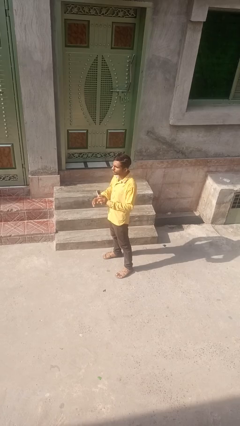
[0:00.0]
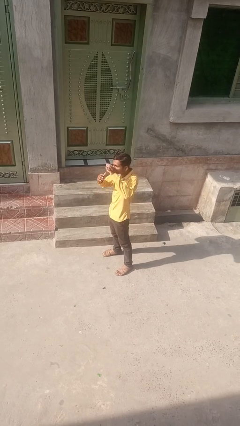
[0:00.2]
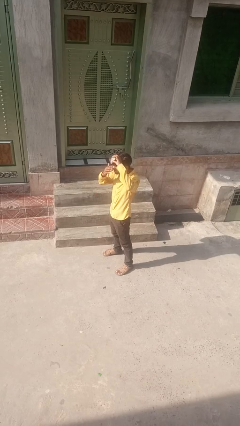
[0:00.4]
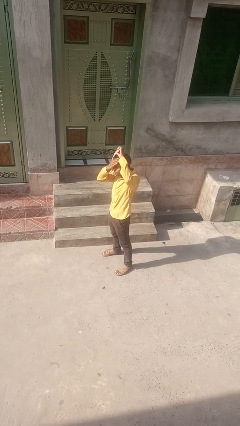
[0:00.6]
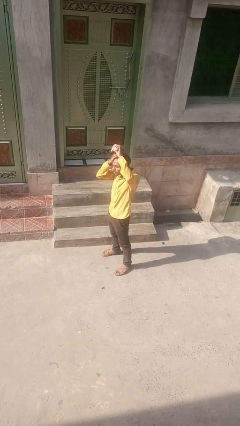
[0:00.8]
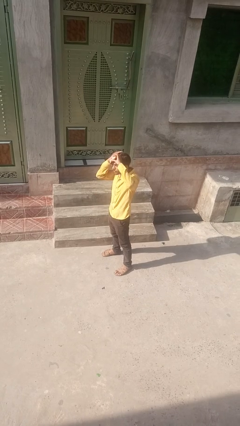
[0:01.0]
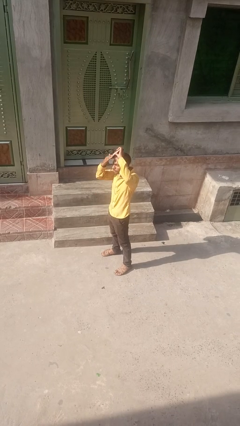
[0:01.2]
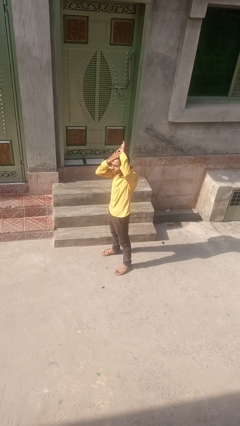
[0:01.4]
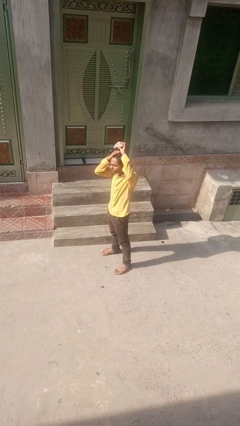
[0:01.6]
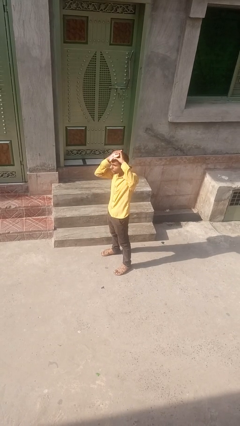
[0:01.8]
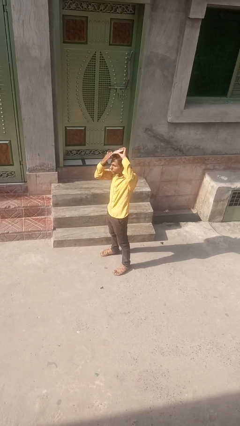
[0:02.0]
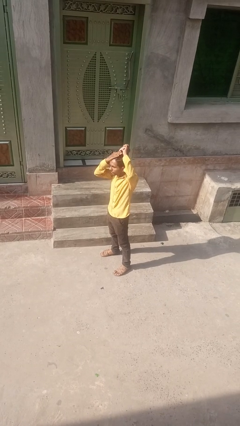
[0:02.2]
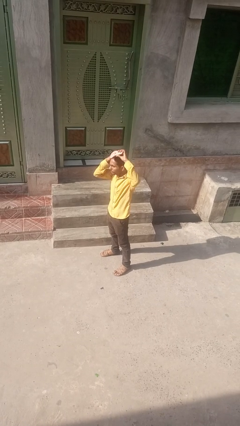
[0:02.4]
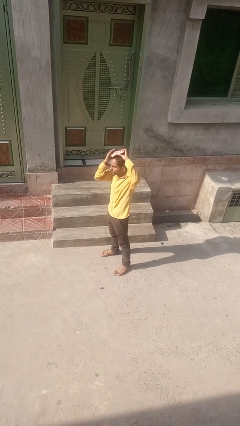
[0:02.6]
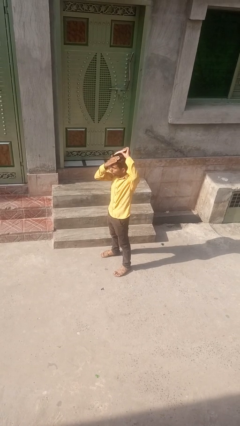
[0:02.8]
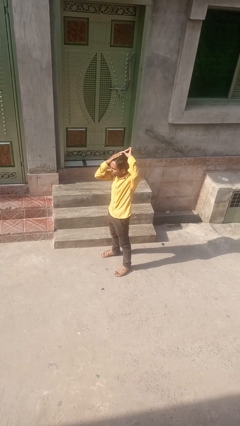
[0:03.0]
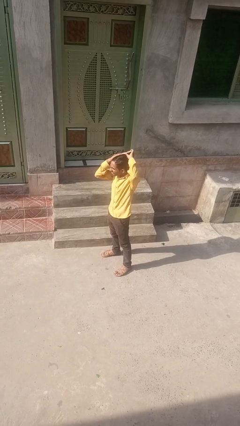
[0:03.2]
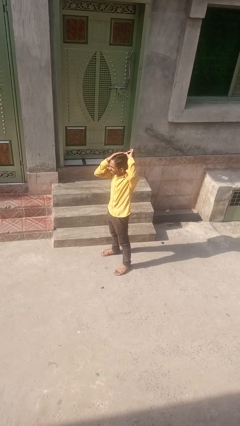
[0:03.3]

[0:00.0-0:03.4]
person brushes hair

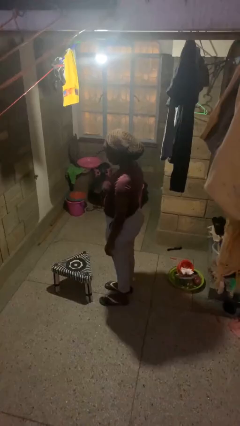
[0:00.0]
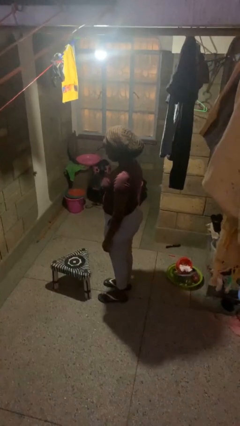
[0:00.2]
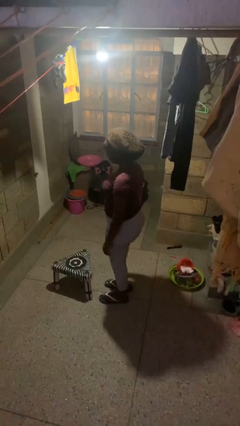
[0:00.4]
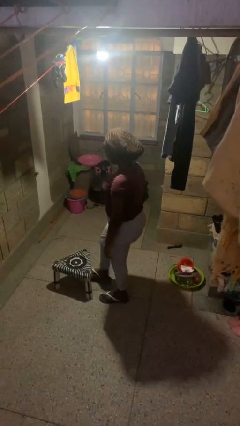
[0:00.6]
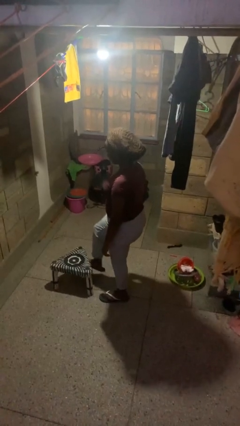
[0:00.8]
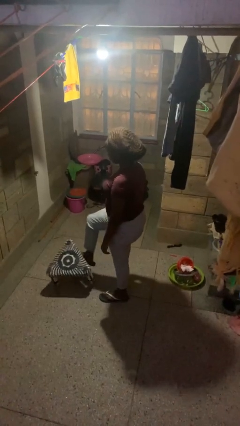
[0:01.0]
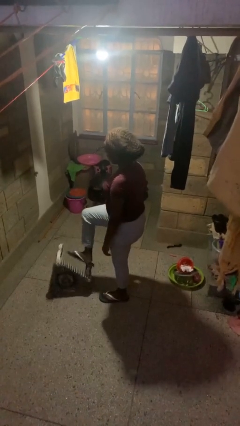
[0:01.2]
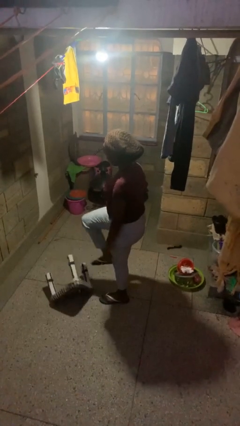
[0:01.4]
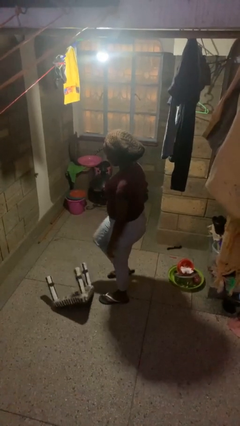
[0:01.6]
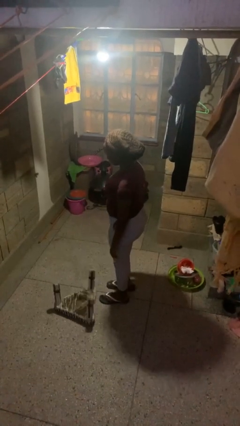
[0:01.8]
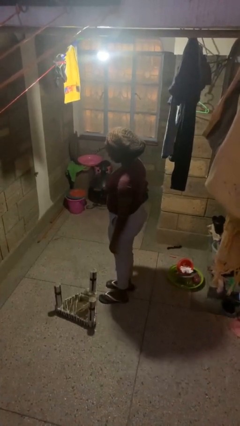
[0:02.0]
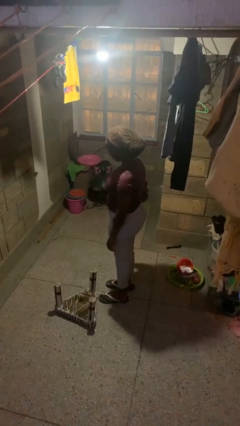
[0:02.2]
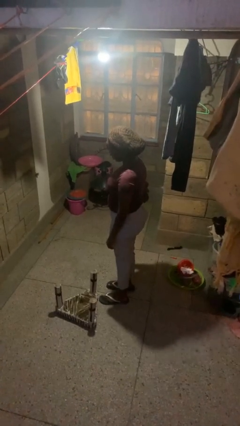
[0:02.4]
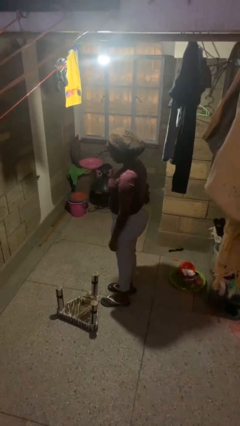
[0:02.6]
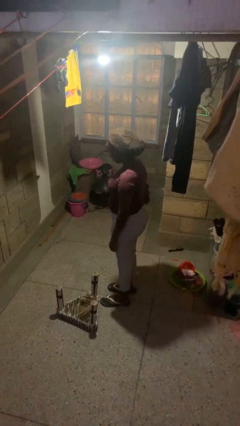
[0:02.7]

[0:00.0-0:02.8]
person knocks over furniture

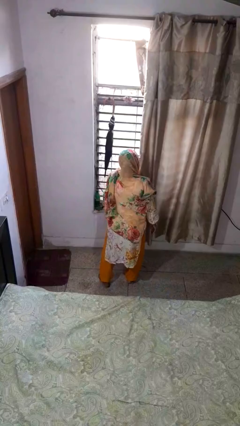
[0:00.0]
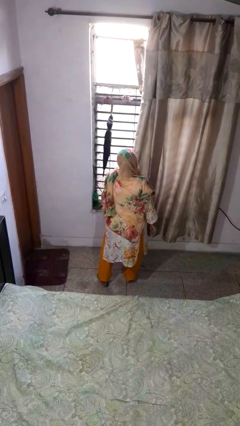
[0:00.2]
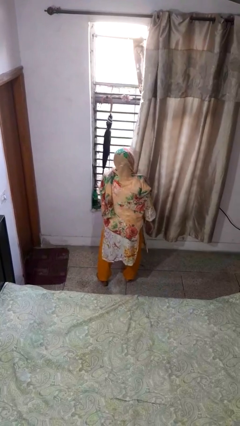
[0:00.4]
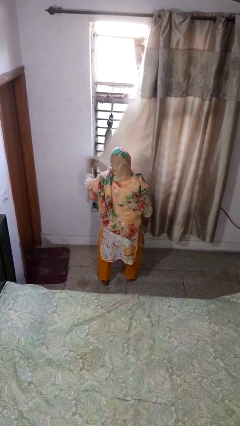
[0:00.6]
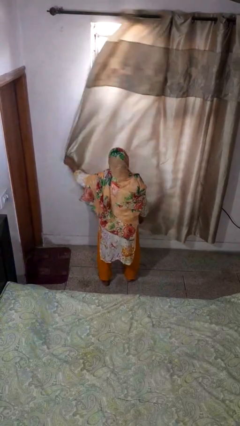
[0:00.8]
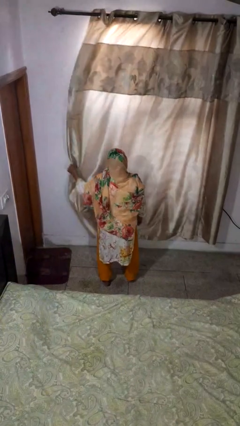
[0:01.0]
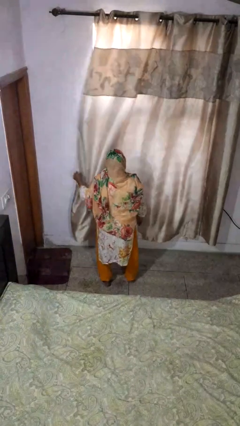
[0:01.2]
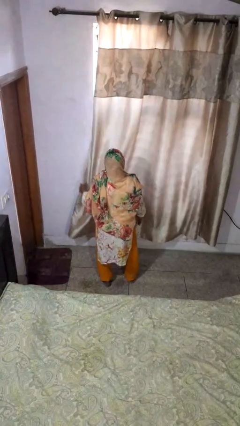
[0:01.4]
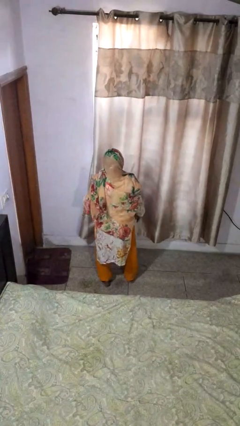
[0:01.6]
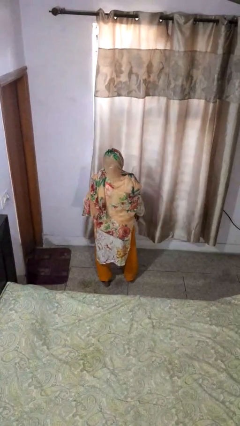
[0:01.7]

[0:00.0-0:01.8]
person closes curtains

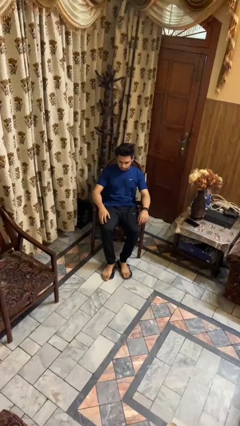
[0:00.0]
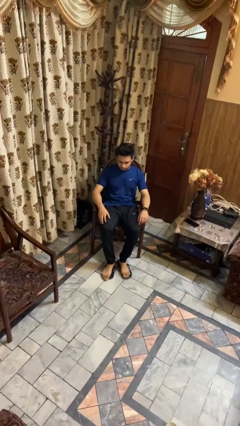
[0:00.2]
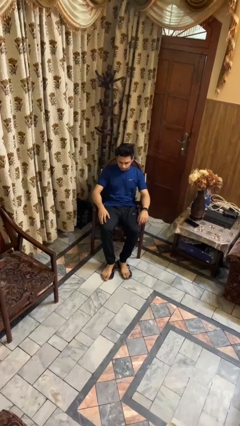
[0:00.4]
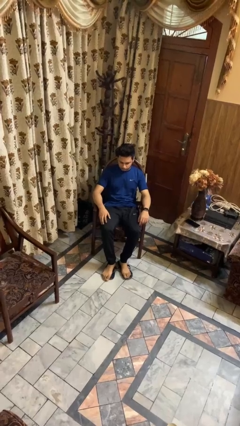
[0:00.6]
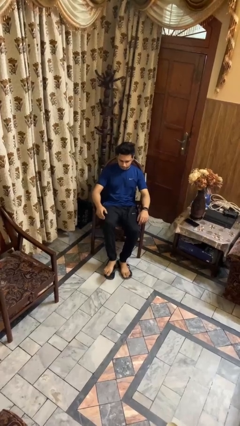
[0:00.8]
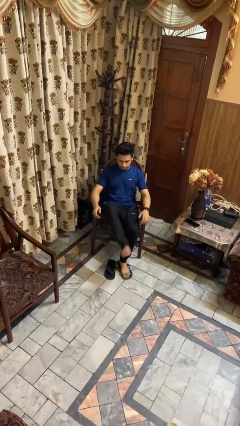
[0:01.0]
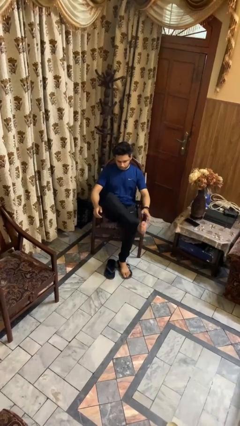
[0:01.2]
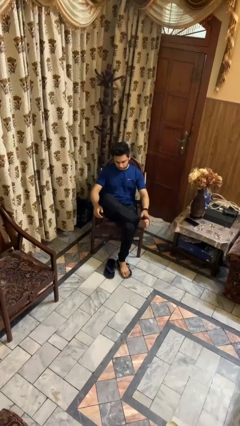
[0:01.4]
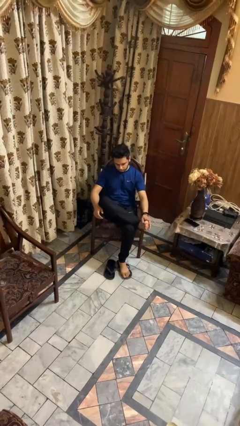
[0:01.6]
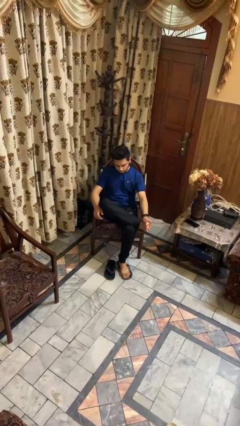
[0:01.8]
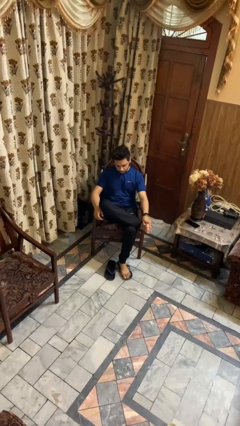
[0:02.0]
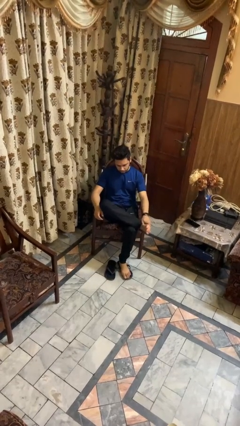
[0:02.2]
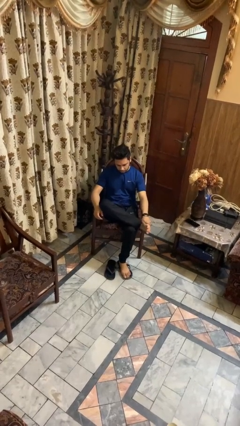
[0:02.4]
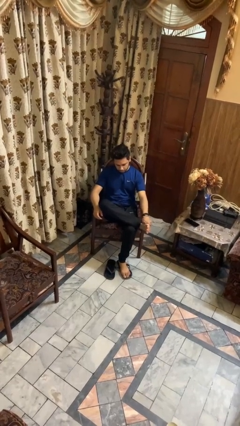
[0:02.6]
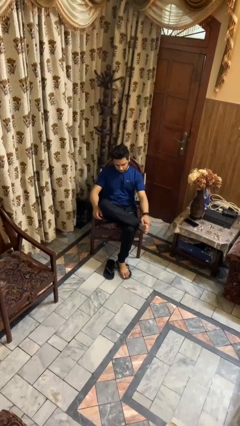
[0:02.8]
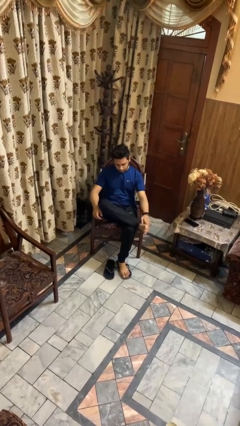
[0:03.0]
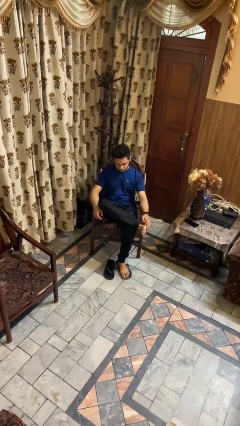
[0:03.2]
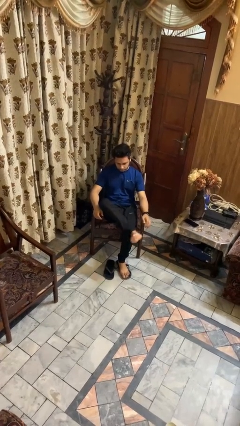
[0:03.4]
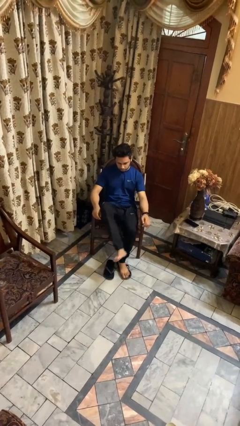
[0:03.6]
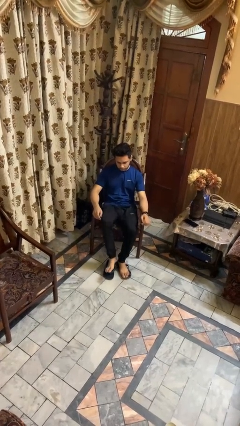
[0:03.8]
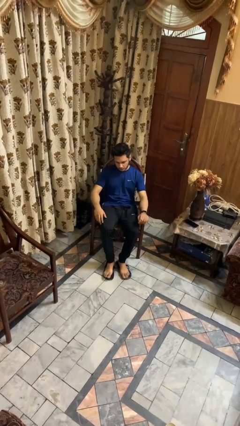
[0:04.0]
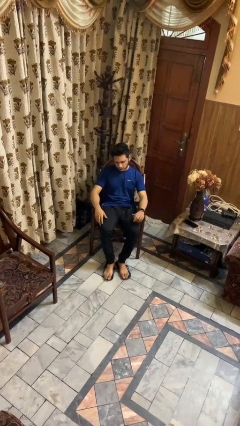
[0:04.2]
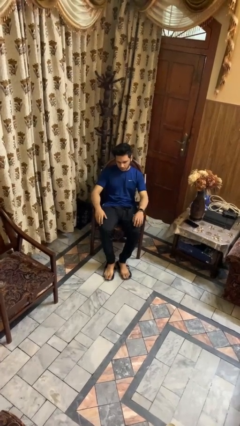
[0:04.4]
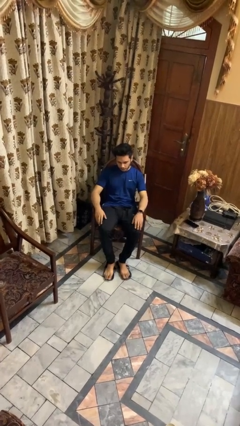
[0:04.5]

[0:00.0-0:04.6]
person rubs foot

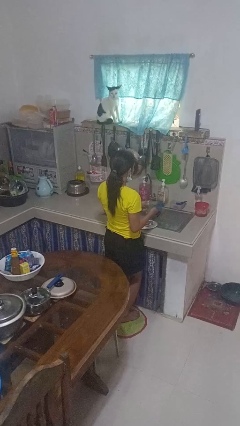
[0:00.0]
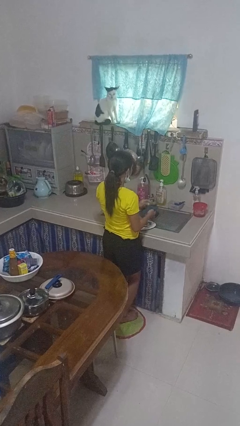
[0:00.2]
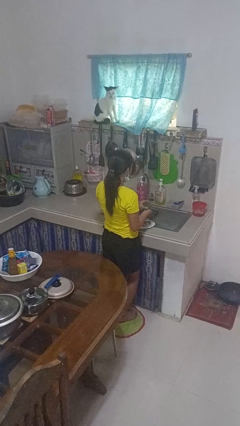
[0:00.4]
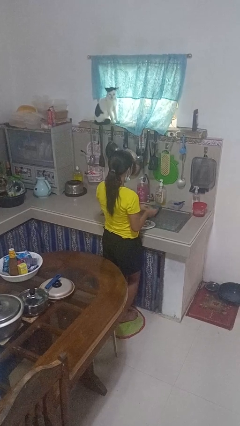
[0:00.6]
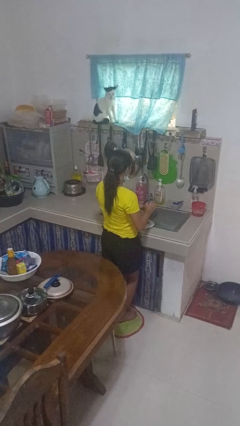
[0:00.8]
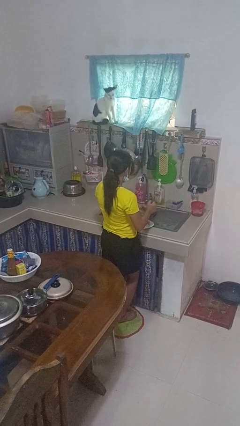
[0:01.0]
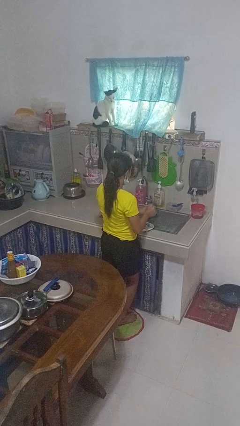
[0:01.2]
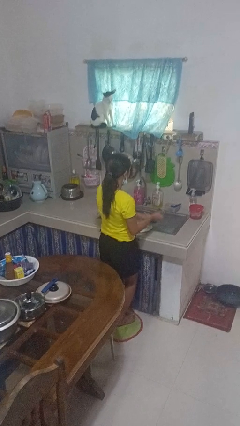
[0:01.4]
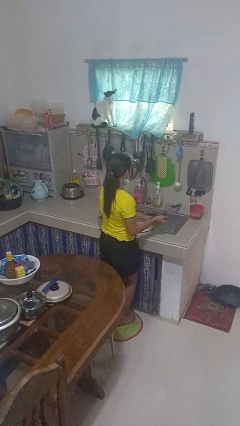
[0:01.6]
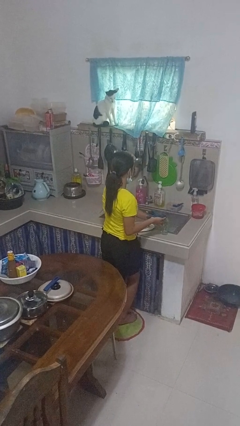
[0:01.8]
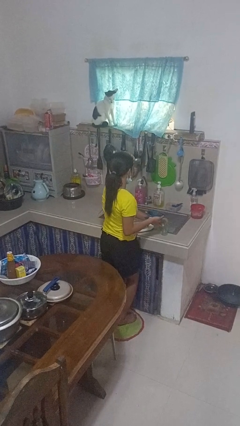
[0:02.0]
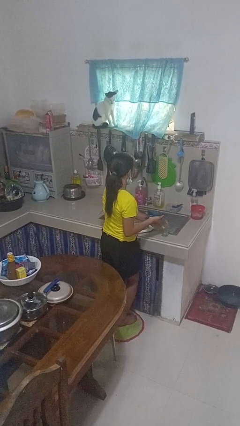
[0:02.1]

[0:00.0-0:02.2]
person dries dish

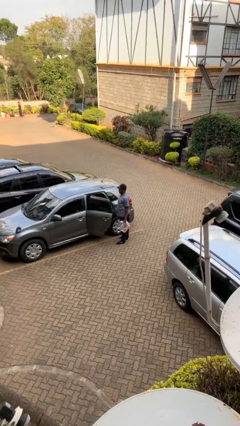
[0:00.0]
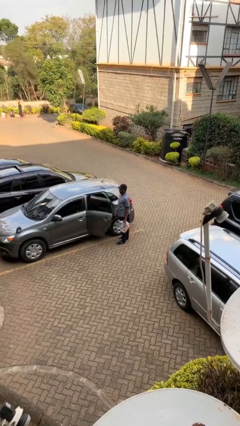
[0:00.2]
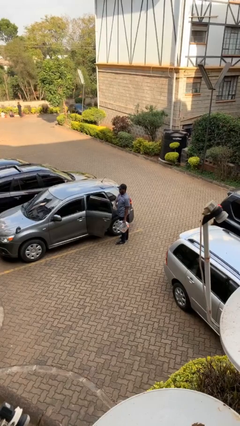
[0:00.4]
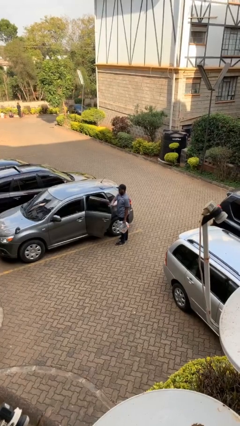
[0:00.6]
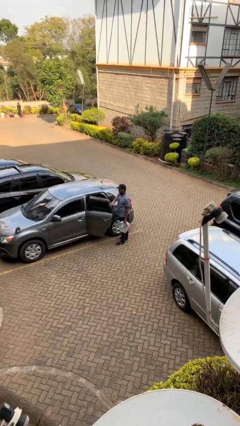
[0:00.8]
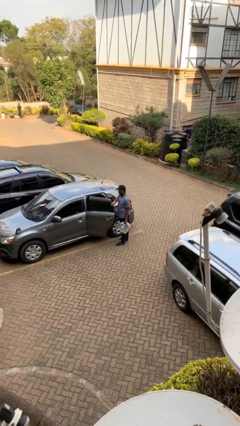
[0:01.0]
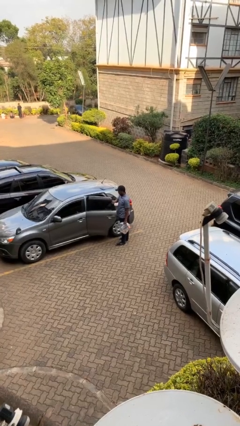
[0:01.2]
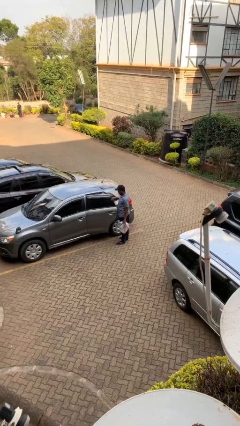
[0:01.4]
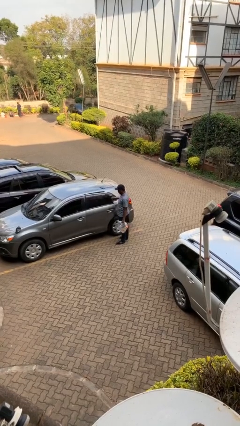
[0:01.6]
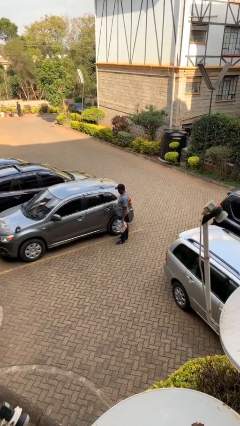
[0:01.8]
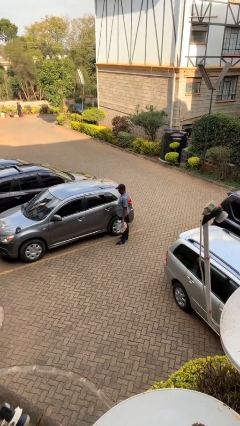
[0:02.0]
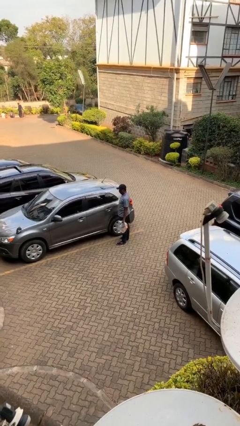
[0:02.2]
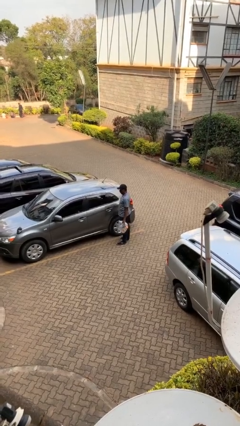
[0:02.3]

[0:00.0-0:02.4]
person closes car door

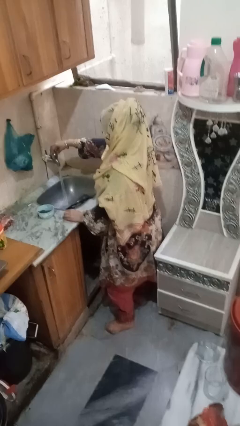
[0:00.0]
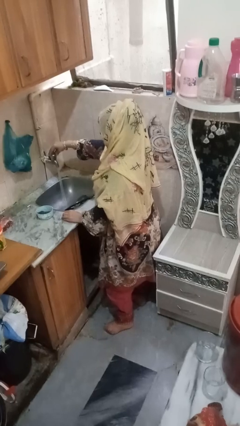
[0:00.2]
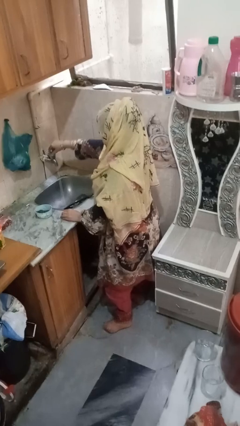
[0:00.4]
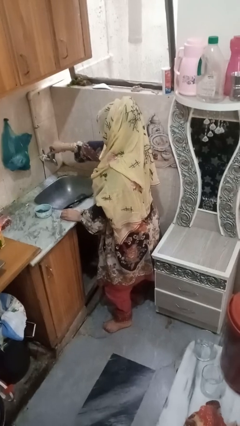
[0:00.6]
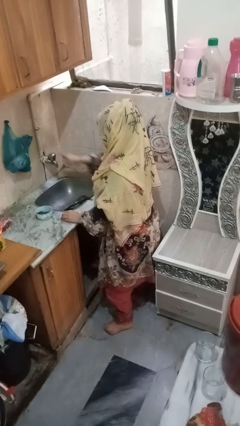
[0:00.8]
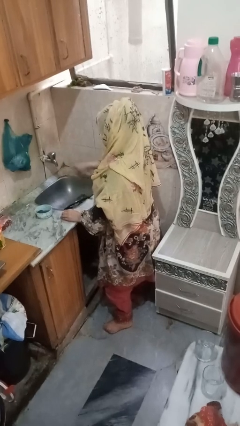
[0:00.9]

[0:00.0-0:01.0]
person turns off faucet
